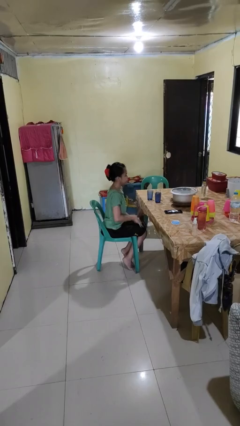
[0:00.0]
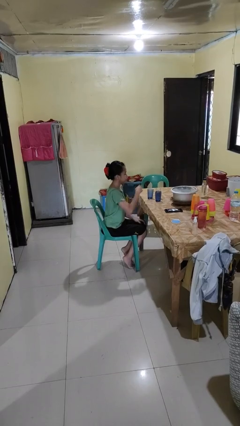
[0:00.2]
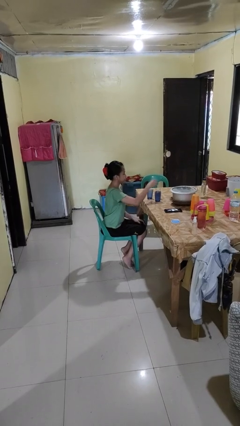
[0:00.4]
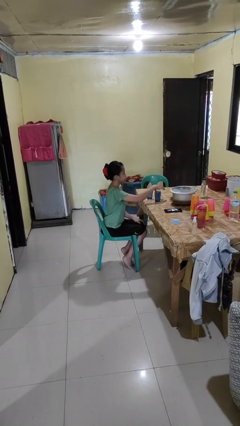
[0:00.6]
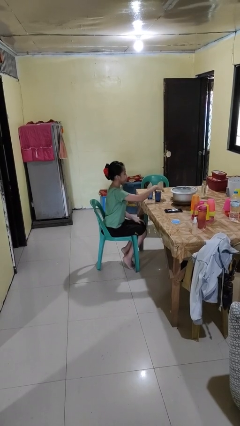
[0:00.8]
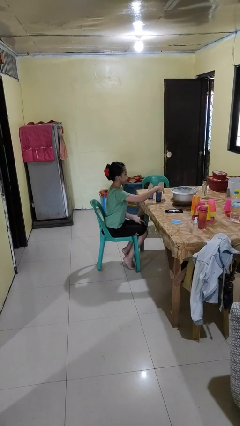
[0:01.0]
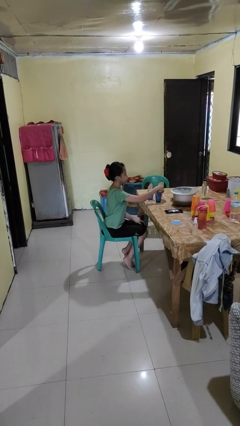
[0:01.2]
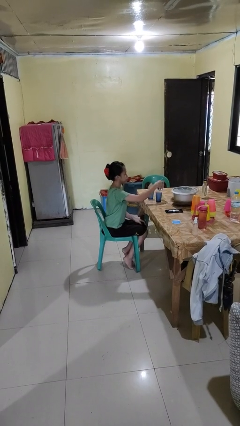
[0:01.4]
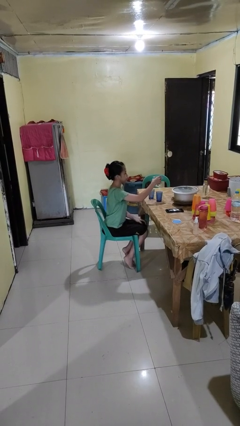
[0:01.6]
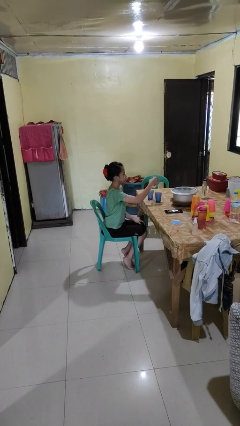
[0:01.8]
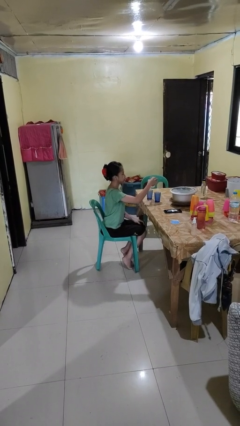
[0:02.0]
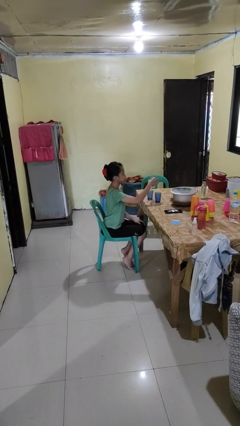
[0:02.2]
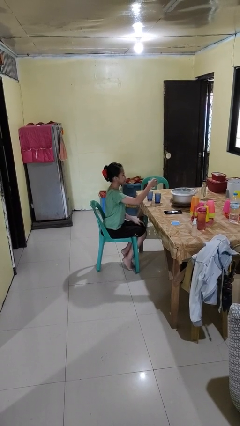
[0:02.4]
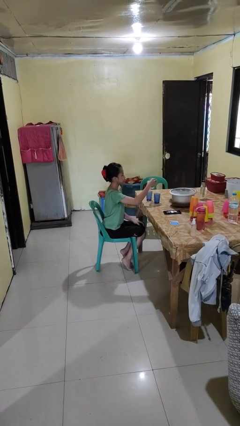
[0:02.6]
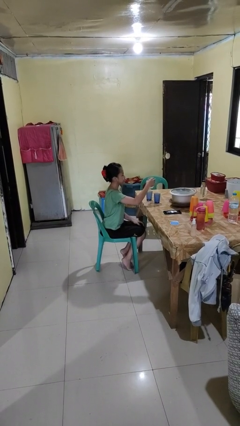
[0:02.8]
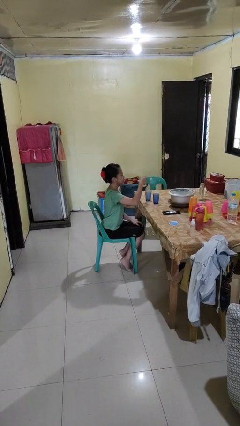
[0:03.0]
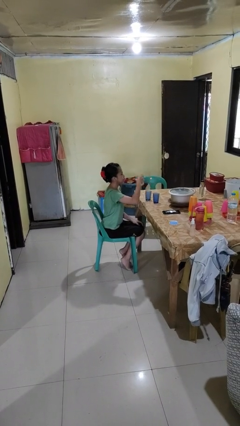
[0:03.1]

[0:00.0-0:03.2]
person picks up object from table

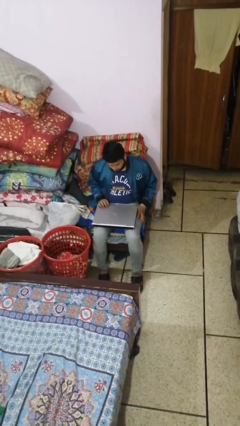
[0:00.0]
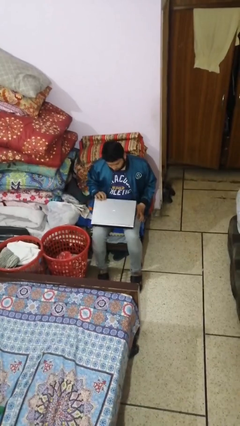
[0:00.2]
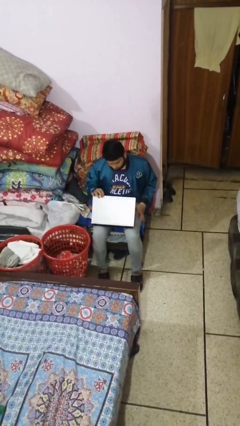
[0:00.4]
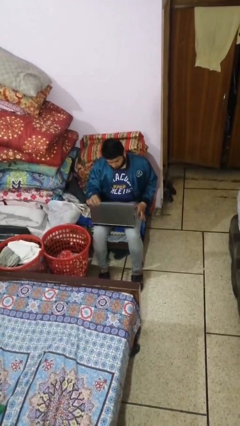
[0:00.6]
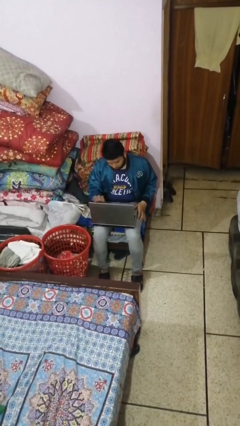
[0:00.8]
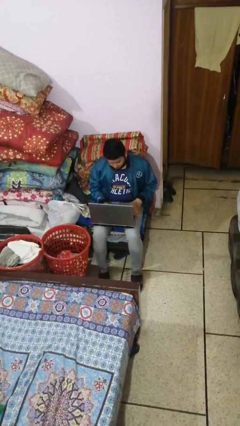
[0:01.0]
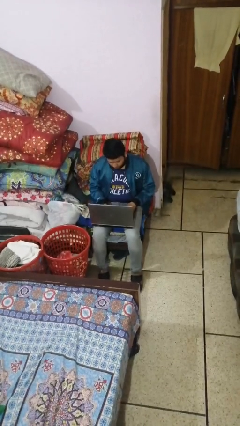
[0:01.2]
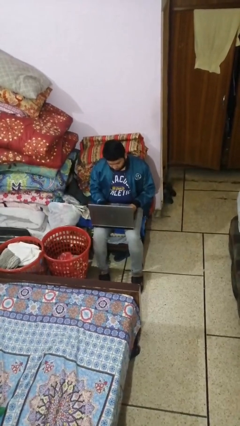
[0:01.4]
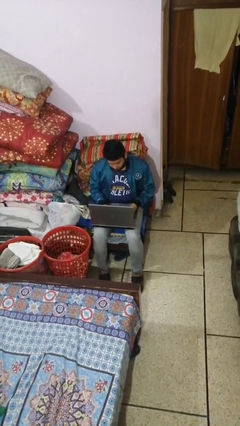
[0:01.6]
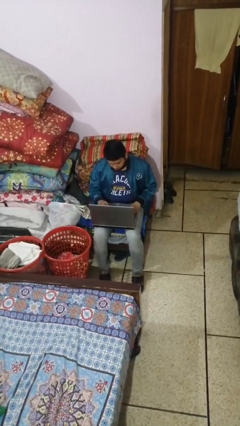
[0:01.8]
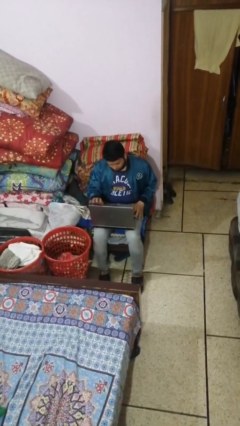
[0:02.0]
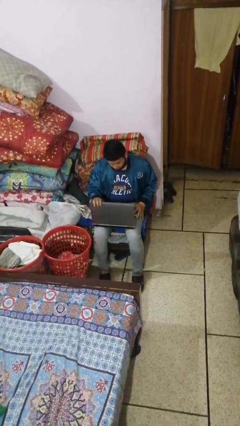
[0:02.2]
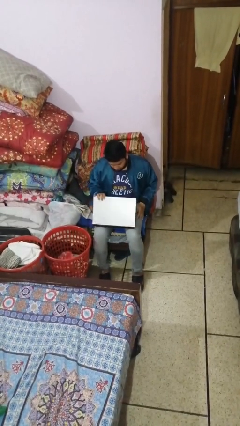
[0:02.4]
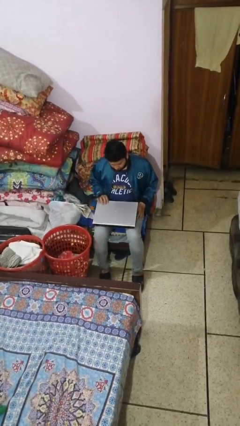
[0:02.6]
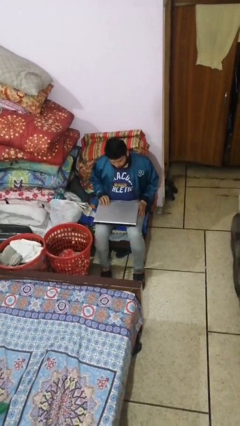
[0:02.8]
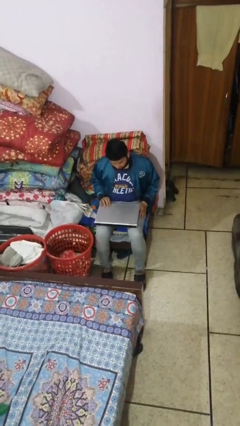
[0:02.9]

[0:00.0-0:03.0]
person interacts with laptop

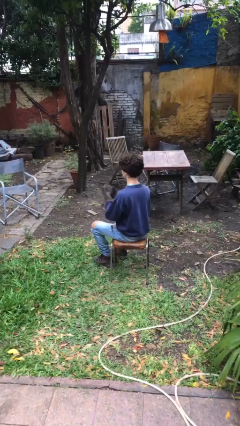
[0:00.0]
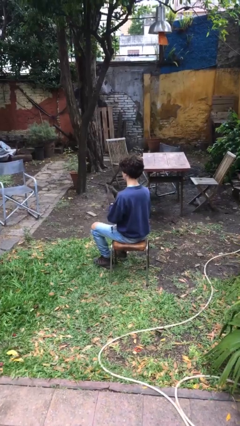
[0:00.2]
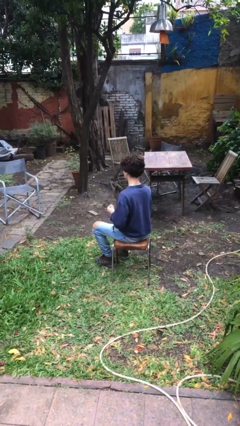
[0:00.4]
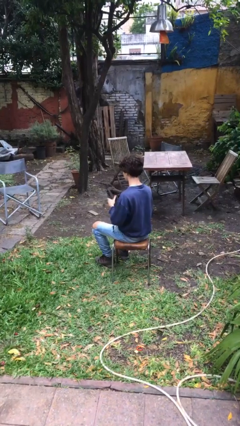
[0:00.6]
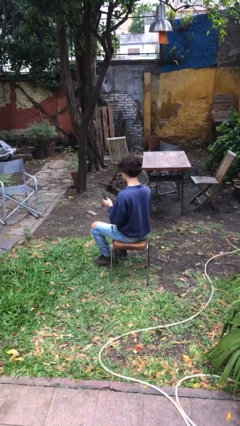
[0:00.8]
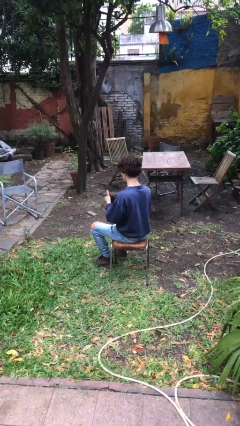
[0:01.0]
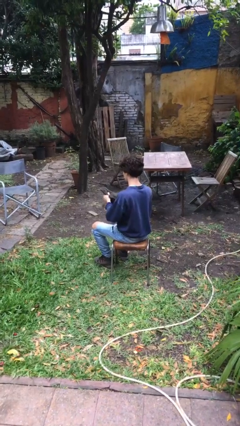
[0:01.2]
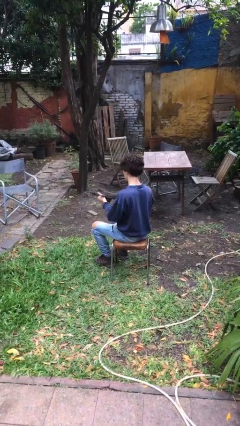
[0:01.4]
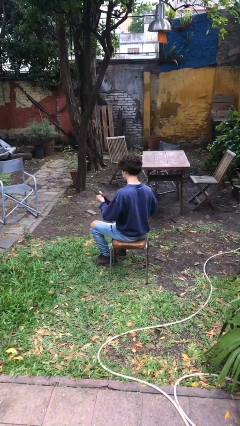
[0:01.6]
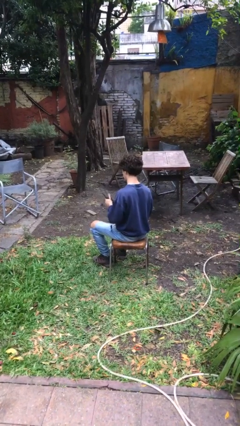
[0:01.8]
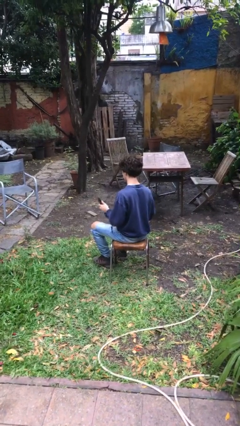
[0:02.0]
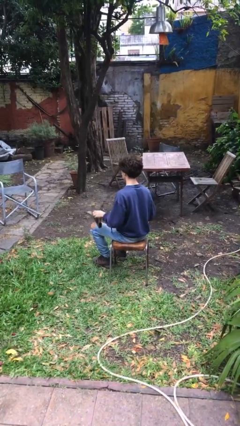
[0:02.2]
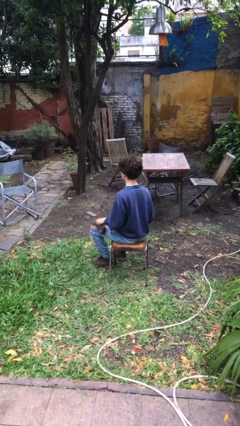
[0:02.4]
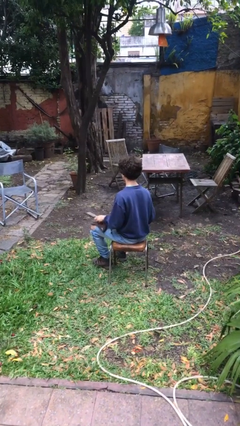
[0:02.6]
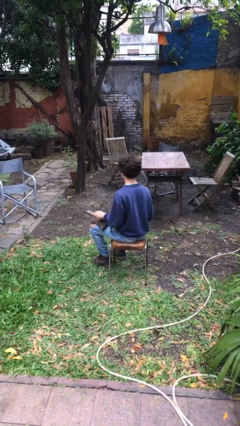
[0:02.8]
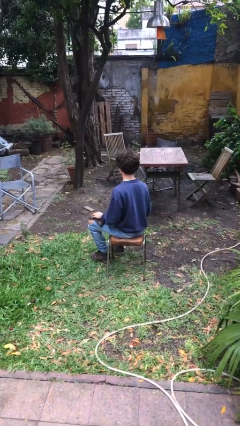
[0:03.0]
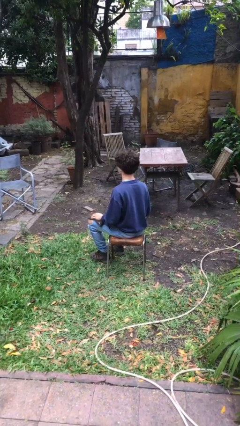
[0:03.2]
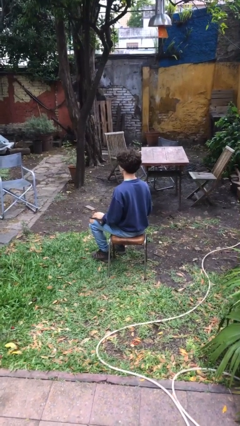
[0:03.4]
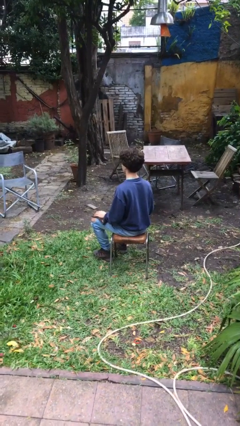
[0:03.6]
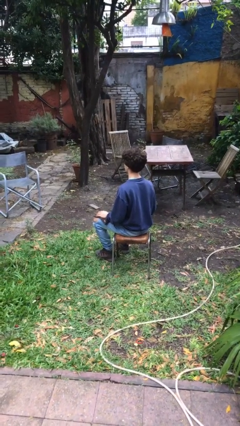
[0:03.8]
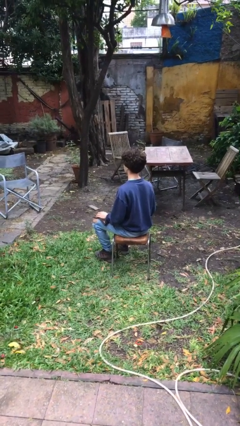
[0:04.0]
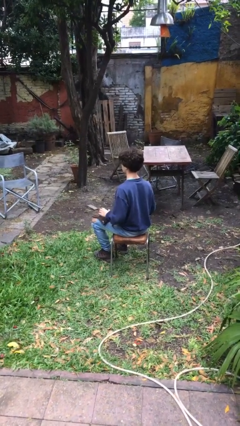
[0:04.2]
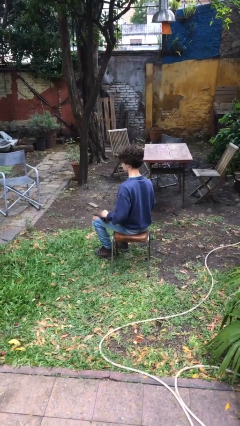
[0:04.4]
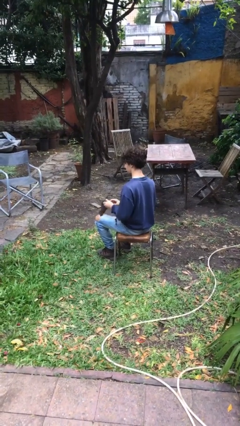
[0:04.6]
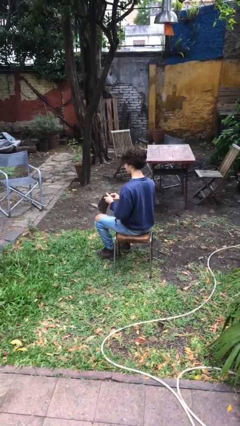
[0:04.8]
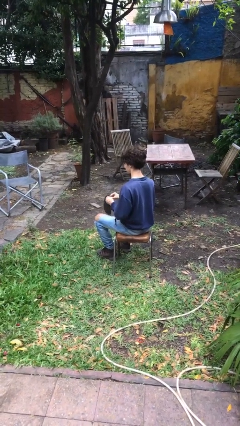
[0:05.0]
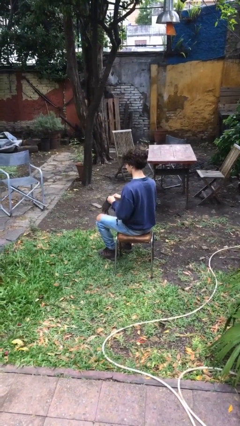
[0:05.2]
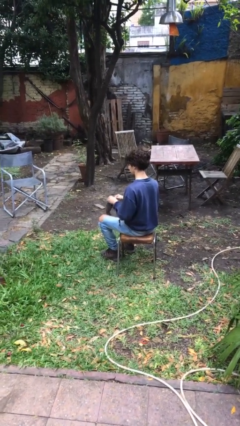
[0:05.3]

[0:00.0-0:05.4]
person takes off gloves

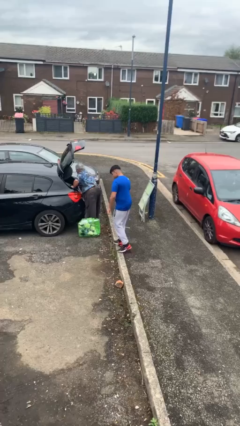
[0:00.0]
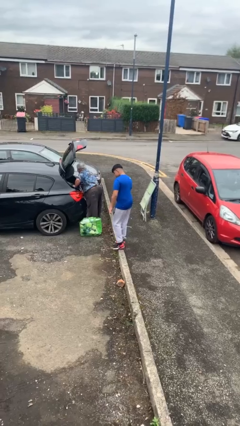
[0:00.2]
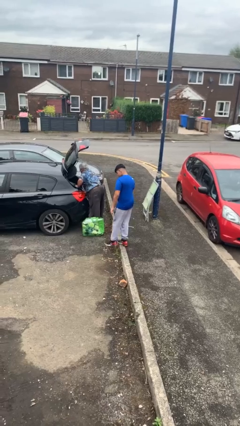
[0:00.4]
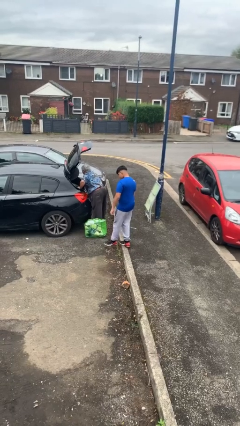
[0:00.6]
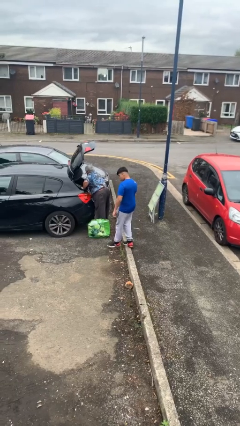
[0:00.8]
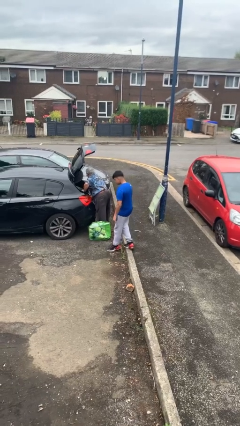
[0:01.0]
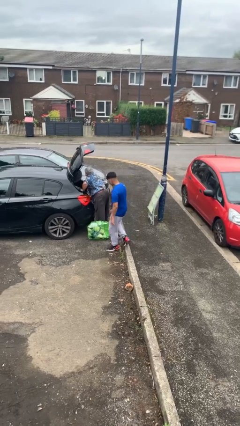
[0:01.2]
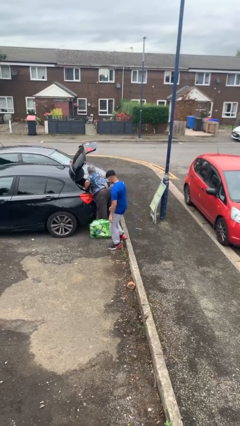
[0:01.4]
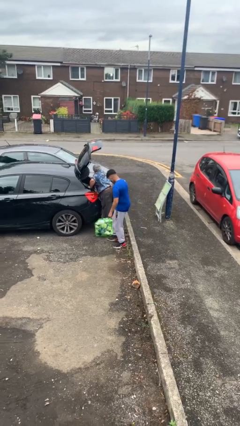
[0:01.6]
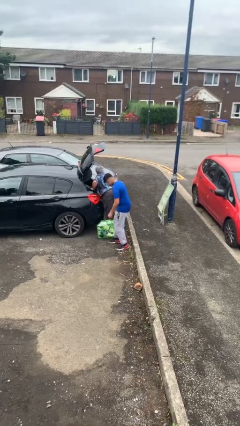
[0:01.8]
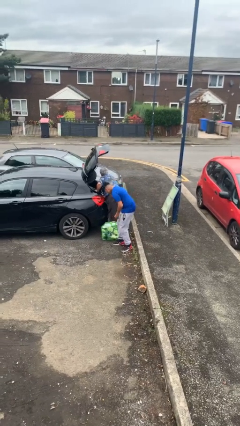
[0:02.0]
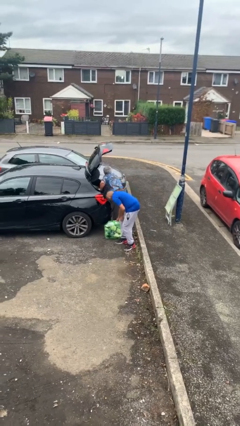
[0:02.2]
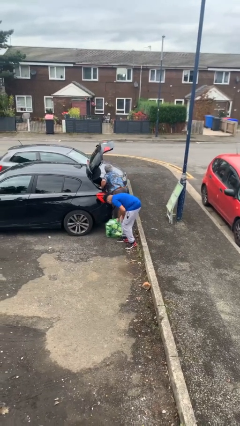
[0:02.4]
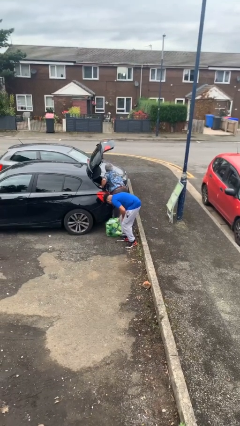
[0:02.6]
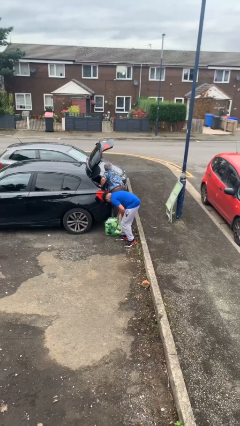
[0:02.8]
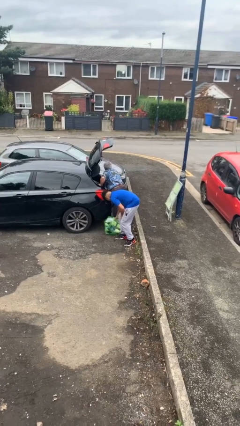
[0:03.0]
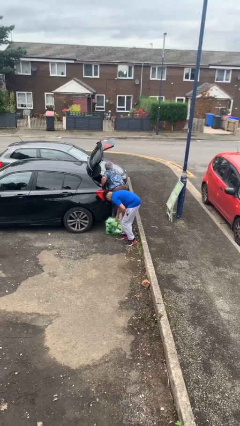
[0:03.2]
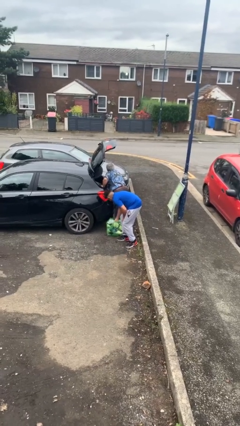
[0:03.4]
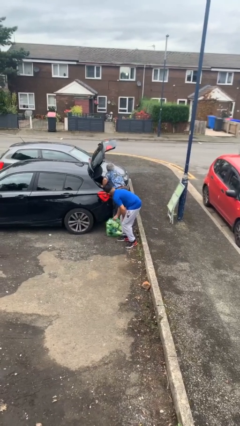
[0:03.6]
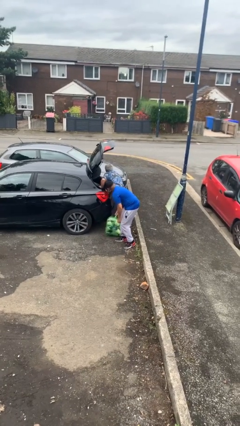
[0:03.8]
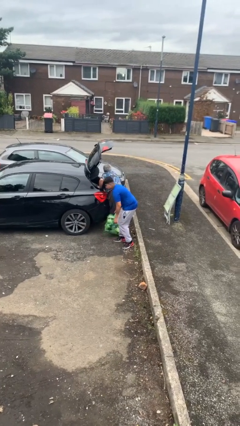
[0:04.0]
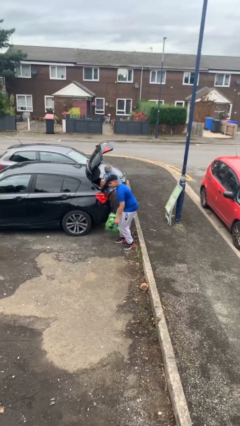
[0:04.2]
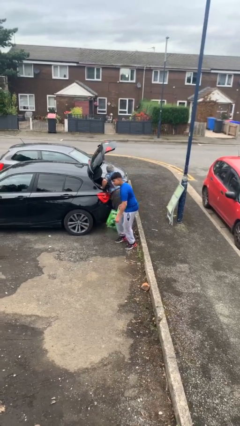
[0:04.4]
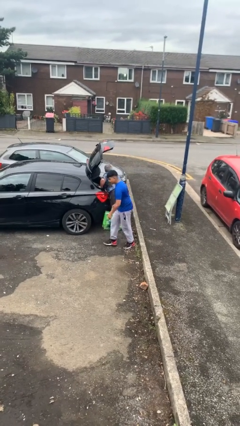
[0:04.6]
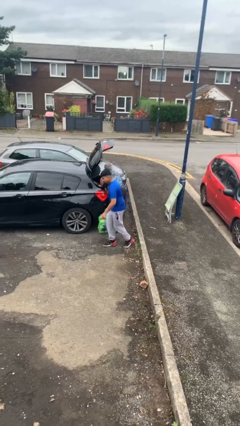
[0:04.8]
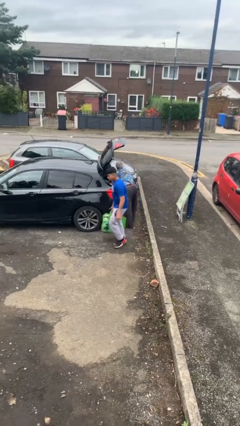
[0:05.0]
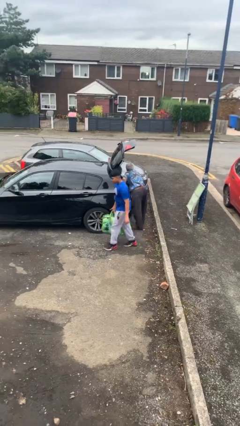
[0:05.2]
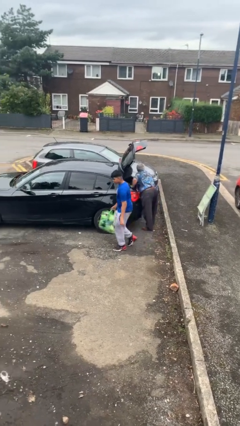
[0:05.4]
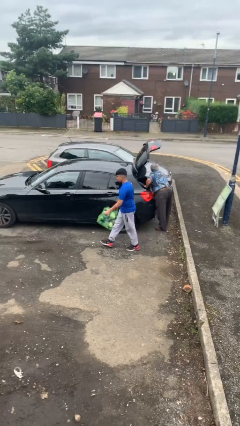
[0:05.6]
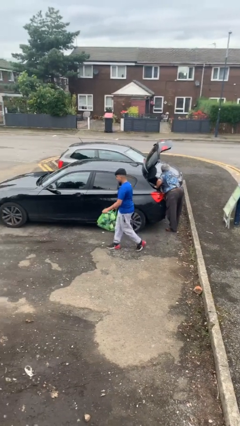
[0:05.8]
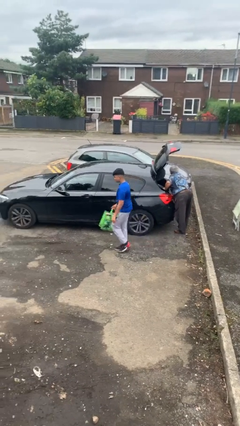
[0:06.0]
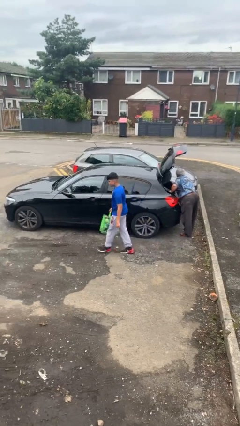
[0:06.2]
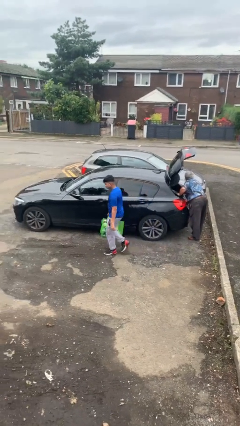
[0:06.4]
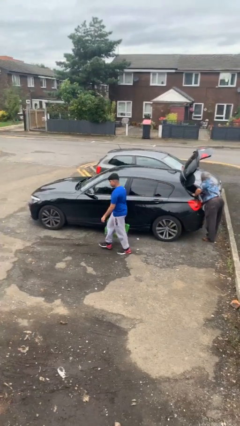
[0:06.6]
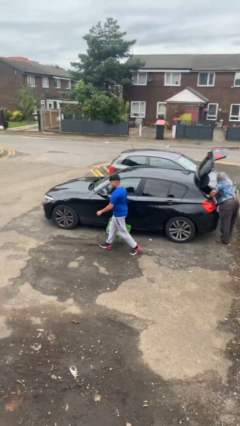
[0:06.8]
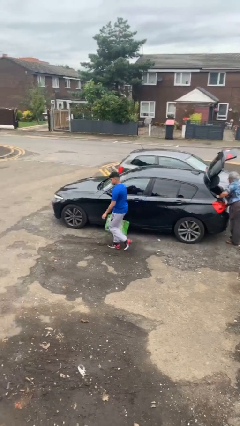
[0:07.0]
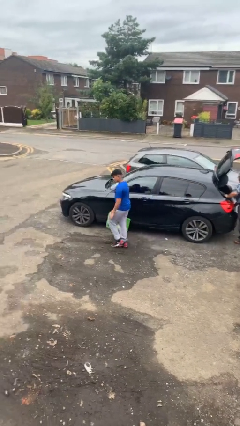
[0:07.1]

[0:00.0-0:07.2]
person steals object from person
